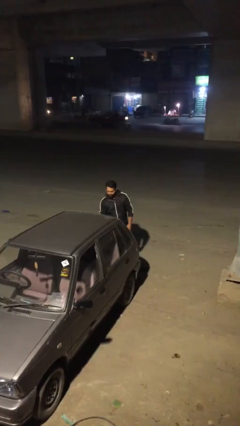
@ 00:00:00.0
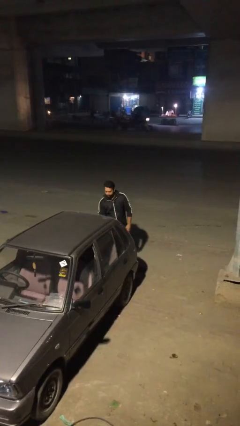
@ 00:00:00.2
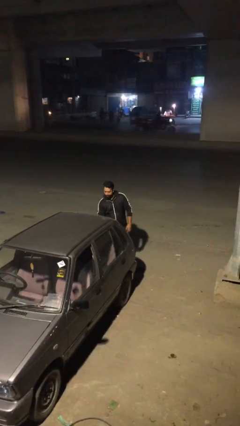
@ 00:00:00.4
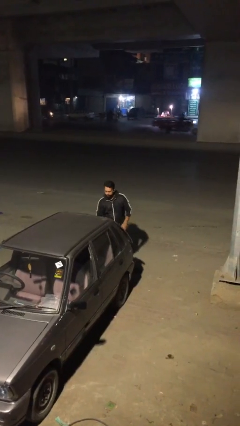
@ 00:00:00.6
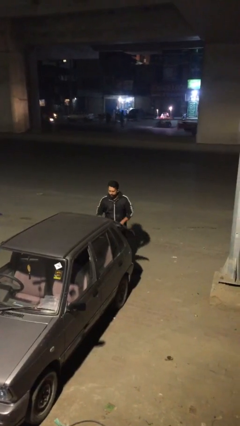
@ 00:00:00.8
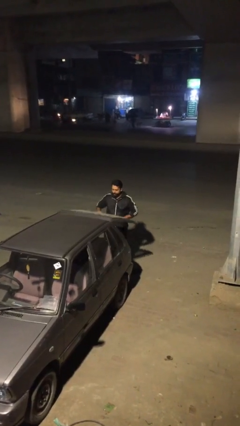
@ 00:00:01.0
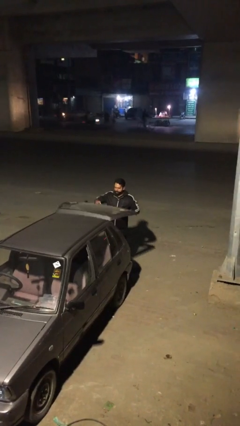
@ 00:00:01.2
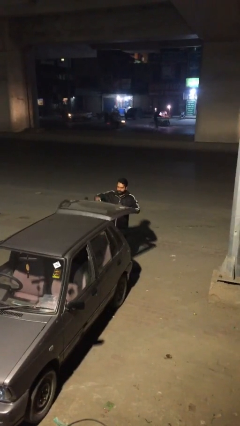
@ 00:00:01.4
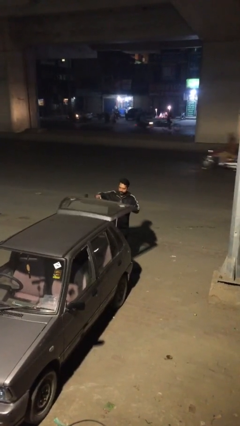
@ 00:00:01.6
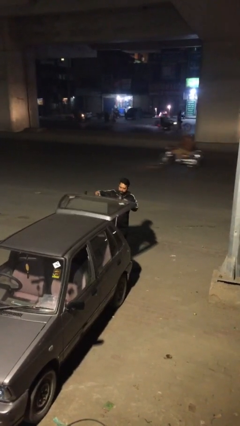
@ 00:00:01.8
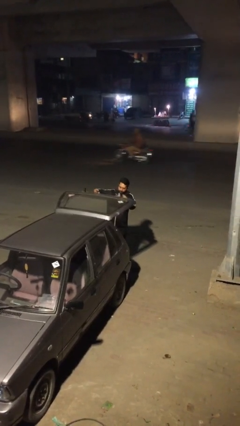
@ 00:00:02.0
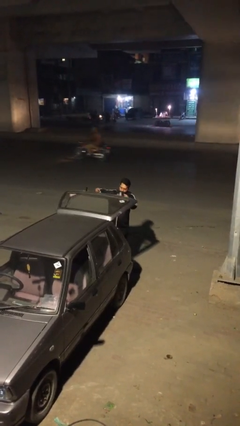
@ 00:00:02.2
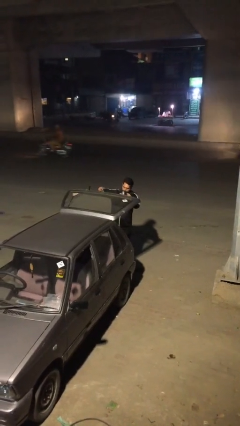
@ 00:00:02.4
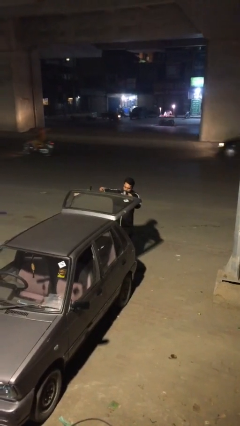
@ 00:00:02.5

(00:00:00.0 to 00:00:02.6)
person opens car trunk

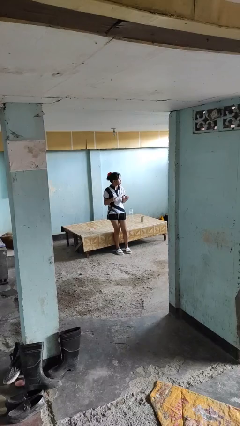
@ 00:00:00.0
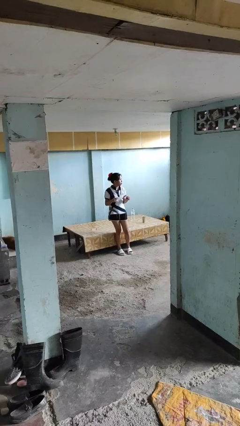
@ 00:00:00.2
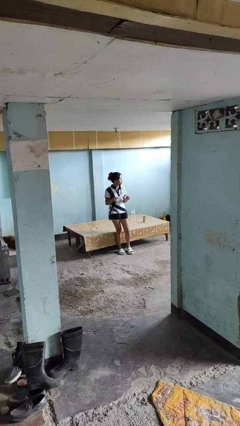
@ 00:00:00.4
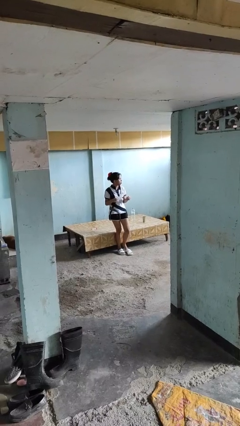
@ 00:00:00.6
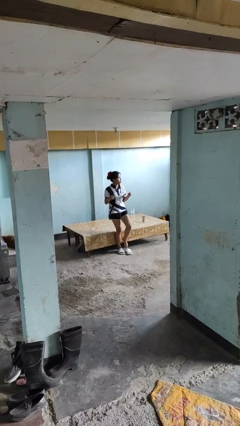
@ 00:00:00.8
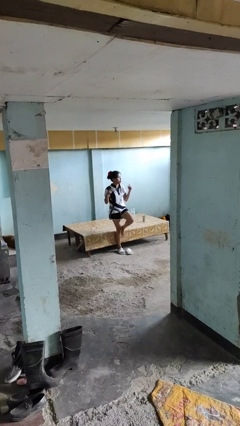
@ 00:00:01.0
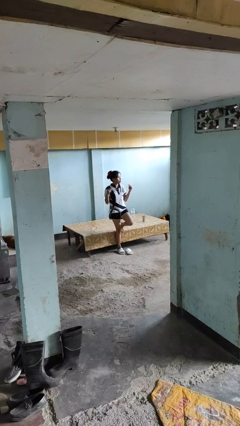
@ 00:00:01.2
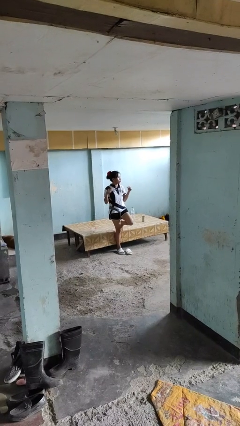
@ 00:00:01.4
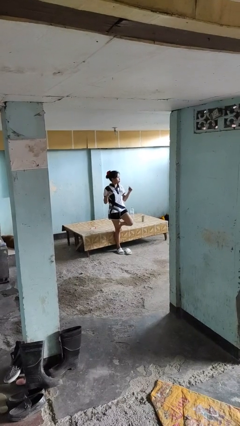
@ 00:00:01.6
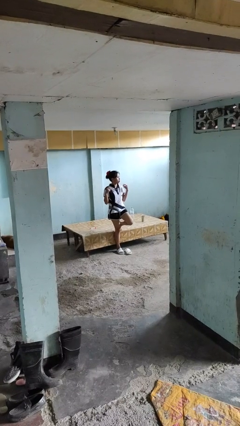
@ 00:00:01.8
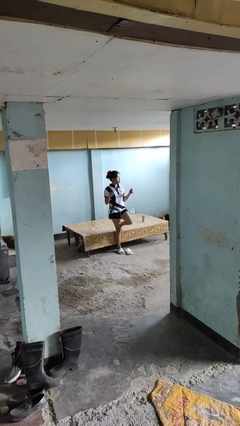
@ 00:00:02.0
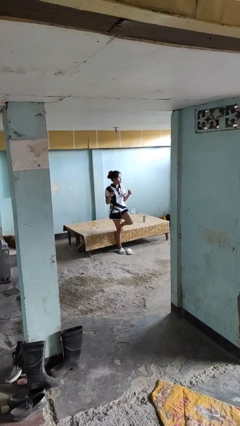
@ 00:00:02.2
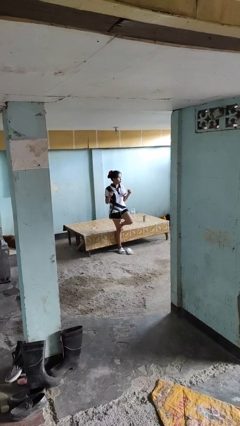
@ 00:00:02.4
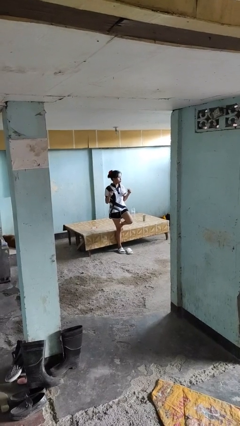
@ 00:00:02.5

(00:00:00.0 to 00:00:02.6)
person snaps fingers

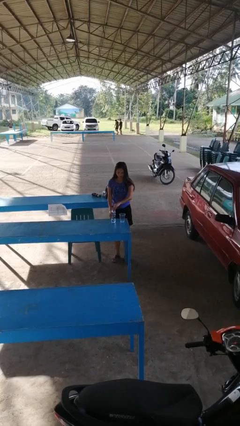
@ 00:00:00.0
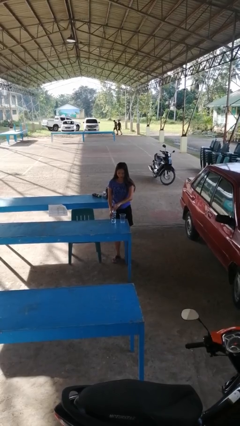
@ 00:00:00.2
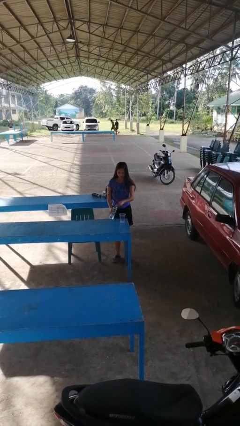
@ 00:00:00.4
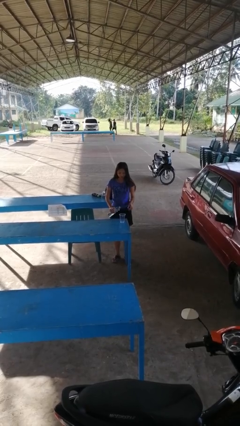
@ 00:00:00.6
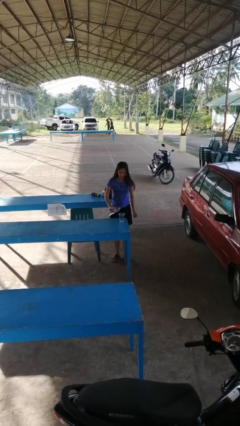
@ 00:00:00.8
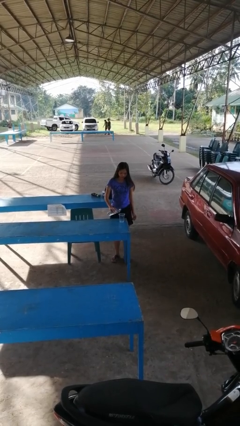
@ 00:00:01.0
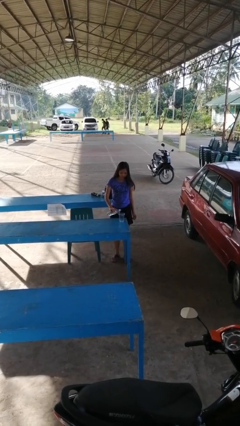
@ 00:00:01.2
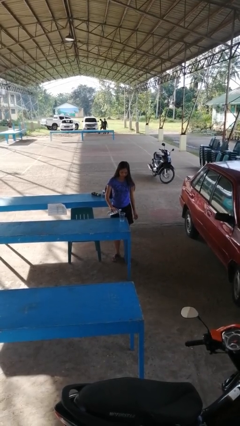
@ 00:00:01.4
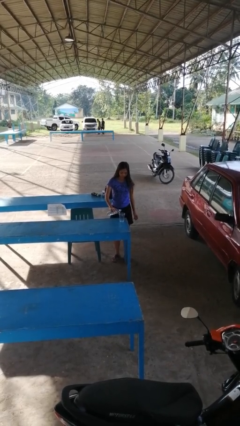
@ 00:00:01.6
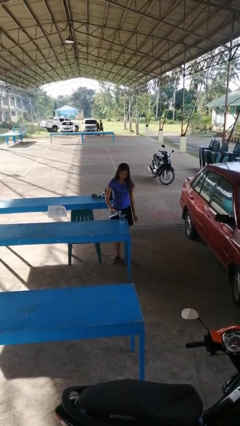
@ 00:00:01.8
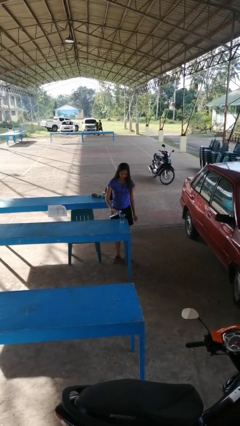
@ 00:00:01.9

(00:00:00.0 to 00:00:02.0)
person pours liquid into cup

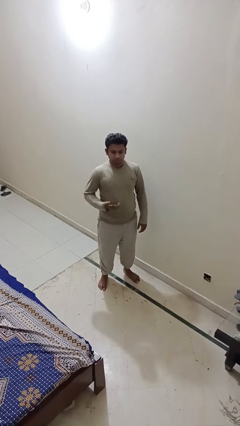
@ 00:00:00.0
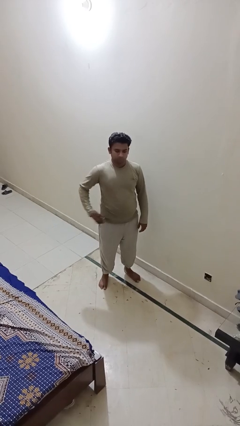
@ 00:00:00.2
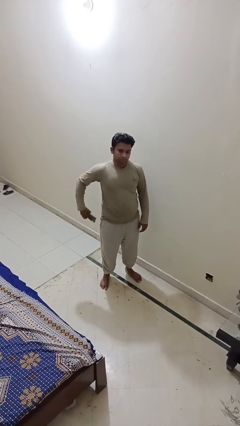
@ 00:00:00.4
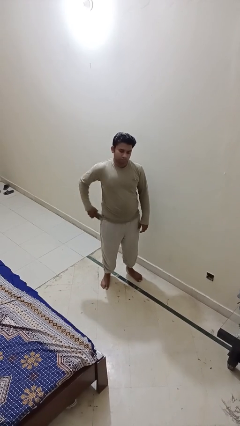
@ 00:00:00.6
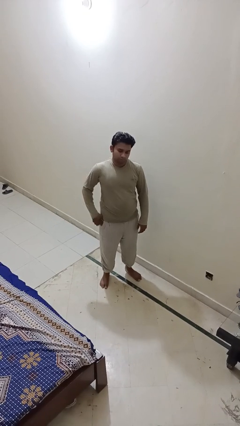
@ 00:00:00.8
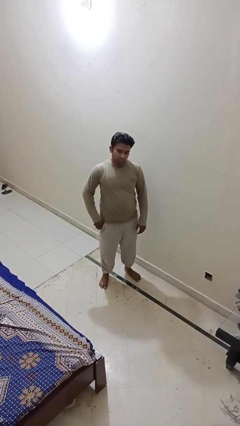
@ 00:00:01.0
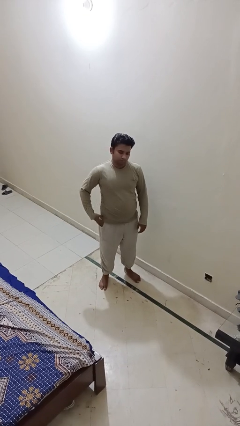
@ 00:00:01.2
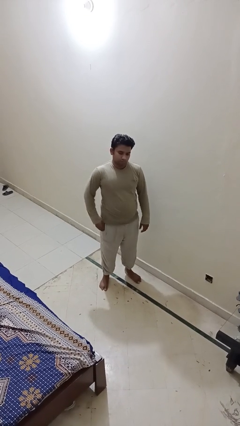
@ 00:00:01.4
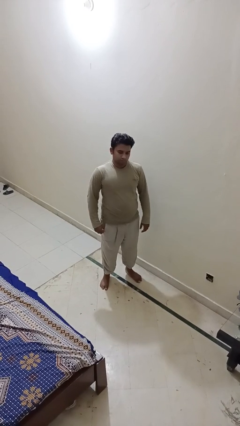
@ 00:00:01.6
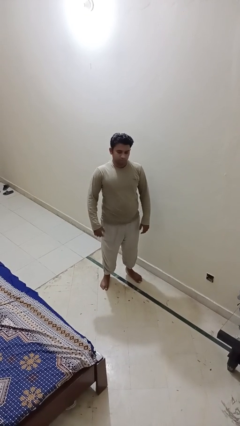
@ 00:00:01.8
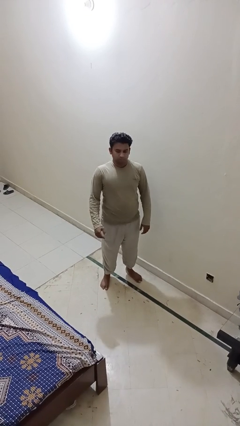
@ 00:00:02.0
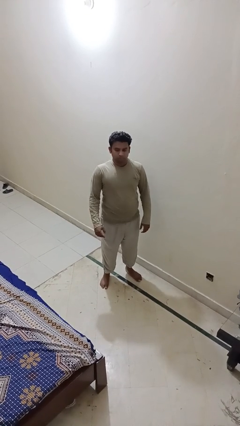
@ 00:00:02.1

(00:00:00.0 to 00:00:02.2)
person puts phone into pocket

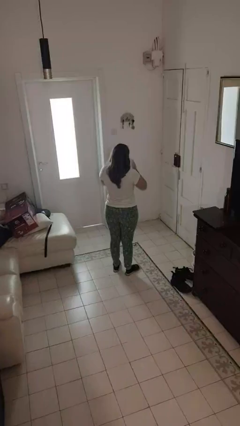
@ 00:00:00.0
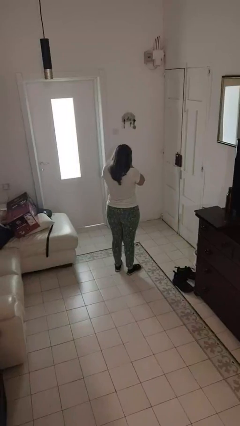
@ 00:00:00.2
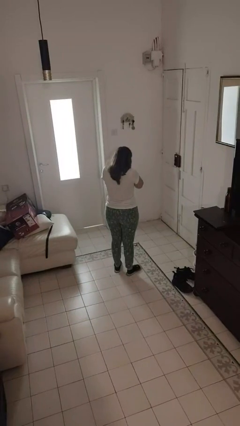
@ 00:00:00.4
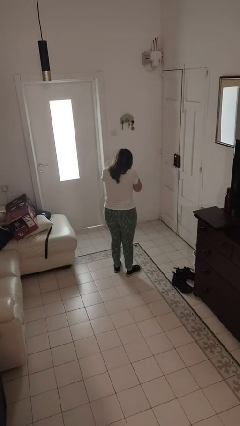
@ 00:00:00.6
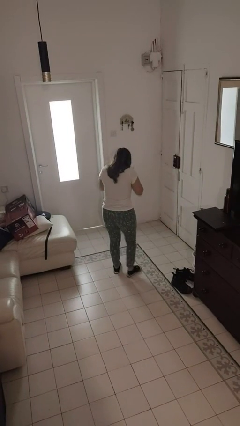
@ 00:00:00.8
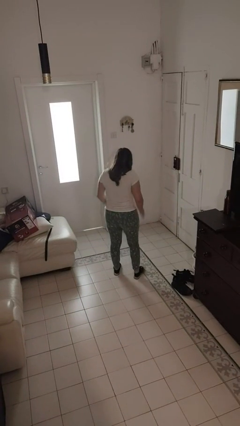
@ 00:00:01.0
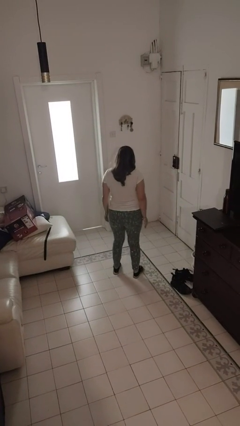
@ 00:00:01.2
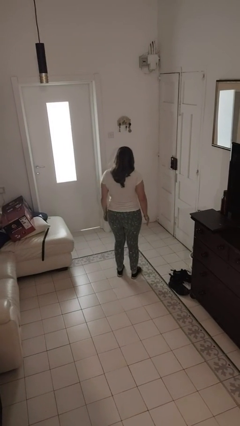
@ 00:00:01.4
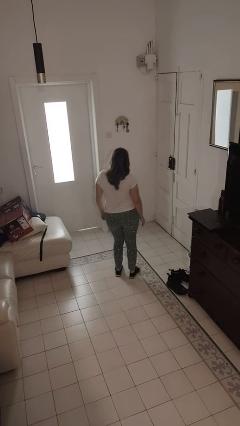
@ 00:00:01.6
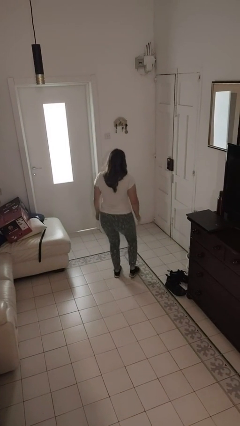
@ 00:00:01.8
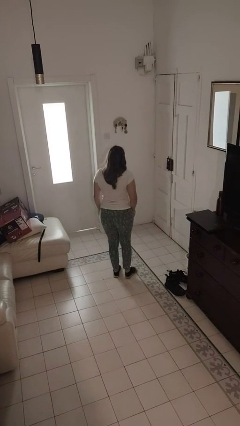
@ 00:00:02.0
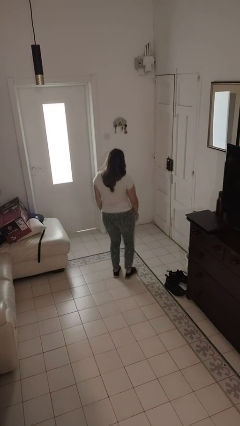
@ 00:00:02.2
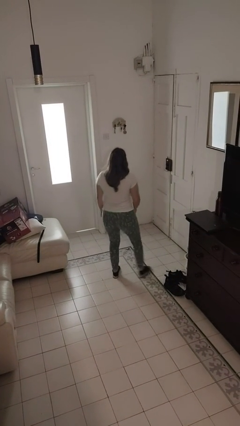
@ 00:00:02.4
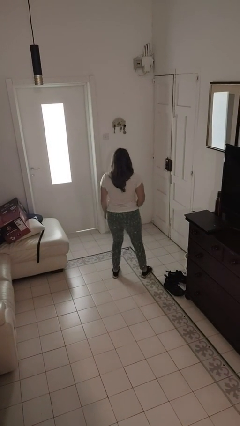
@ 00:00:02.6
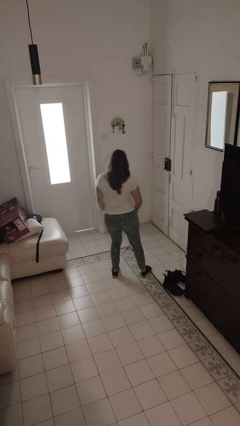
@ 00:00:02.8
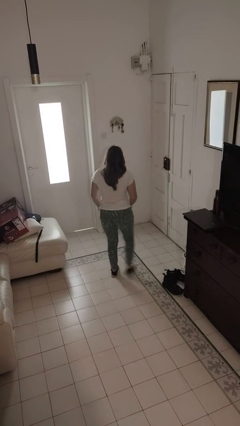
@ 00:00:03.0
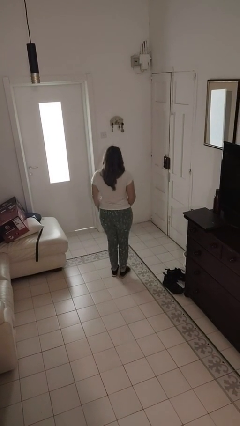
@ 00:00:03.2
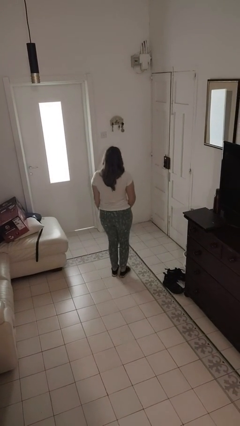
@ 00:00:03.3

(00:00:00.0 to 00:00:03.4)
person dances in place

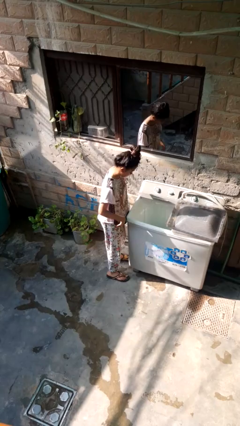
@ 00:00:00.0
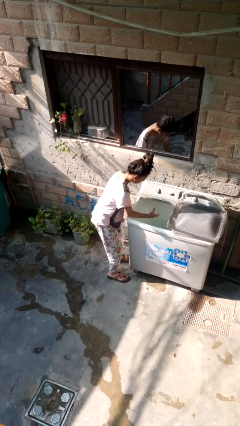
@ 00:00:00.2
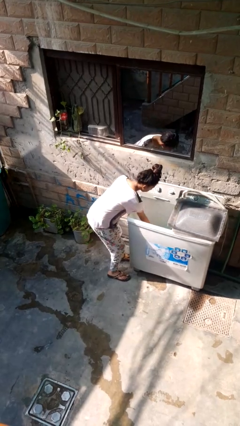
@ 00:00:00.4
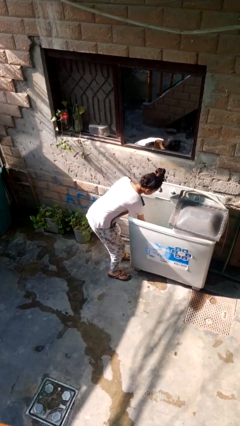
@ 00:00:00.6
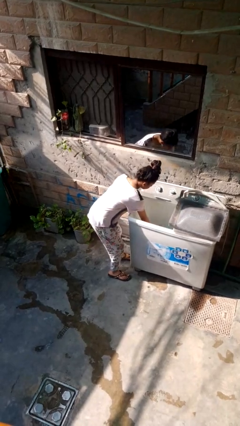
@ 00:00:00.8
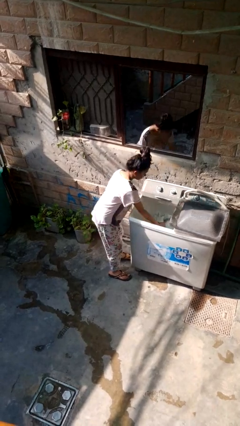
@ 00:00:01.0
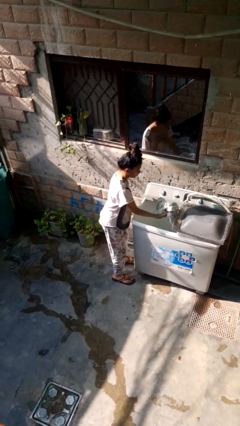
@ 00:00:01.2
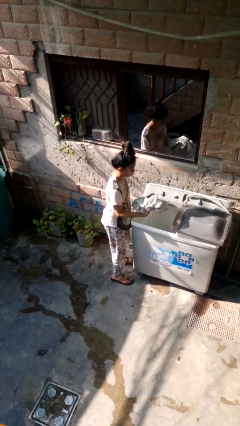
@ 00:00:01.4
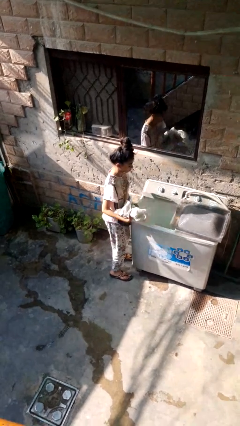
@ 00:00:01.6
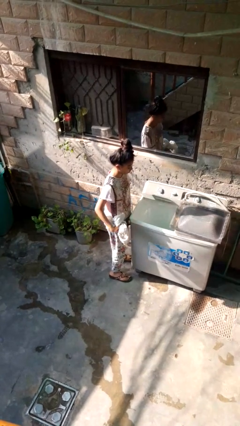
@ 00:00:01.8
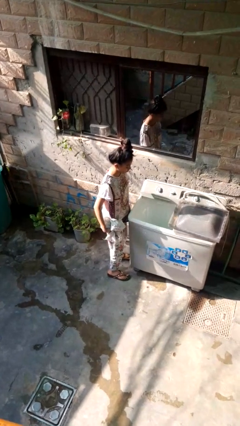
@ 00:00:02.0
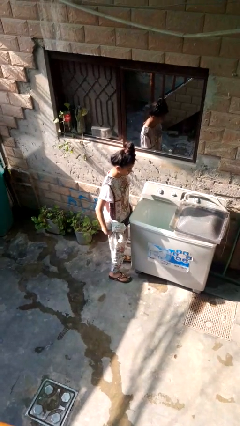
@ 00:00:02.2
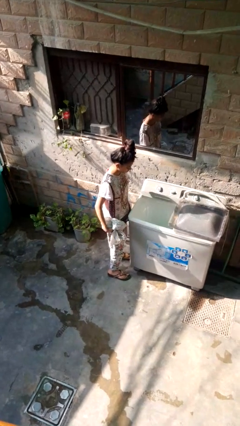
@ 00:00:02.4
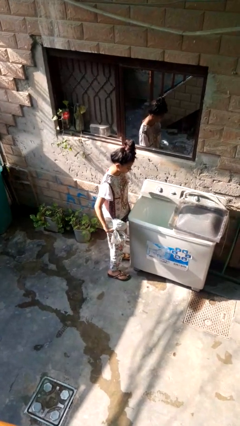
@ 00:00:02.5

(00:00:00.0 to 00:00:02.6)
person unloads clotheswasher

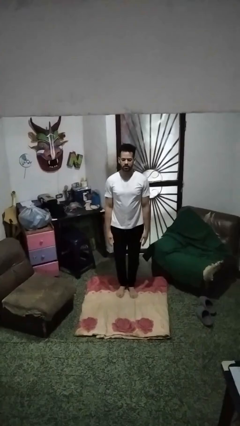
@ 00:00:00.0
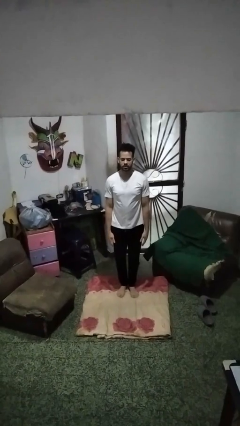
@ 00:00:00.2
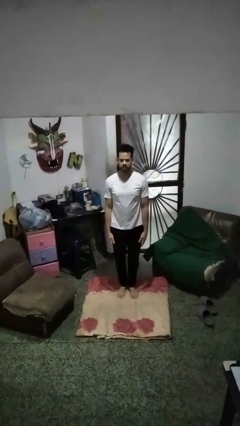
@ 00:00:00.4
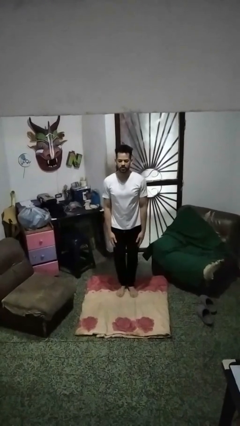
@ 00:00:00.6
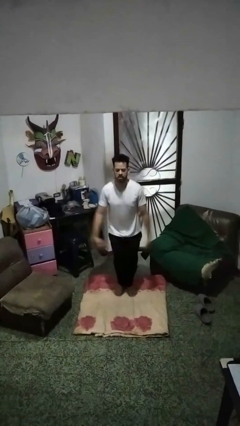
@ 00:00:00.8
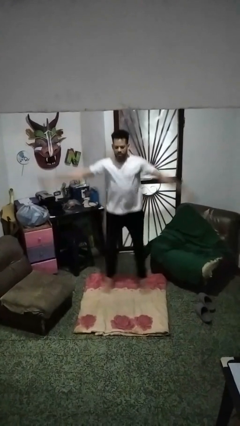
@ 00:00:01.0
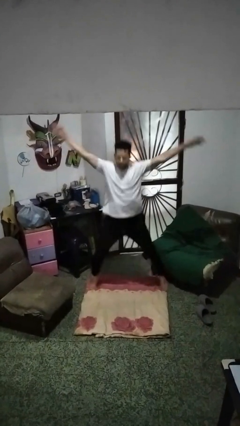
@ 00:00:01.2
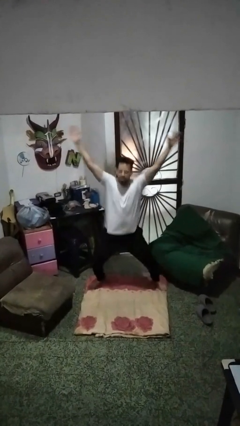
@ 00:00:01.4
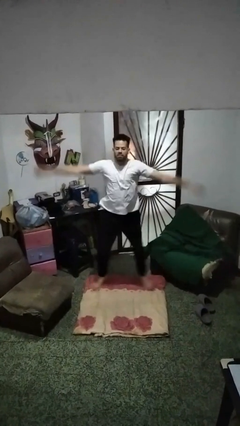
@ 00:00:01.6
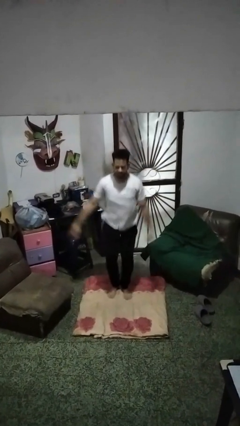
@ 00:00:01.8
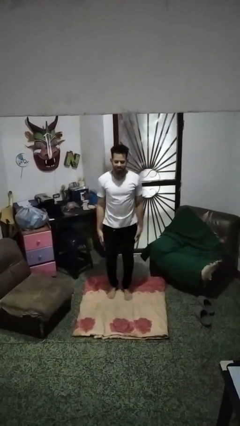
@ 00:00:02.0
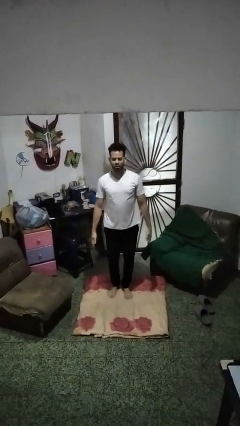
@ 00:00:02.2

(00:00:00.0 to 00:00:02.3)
person exercises with jumping jacks
